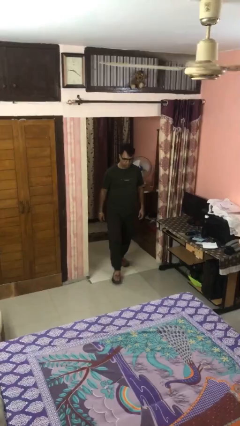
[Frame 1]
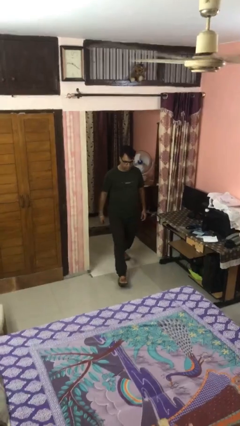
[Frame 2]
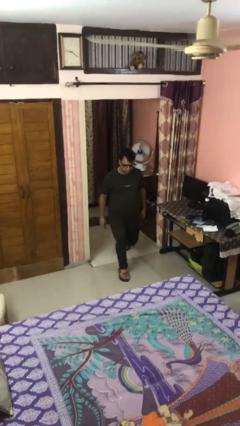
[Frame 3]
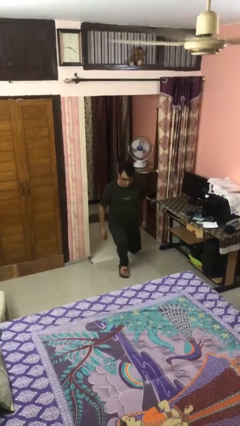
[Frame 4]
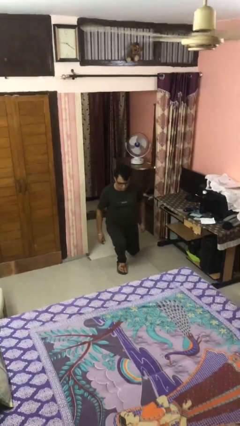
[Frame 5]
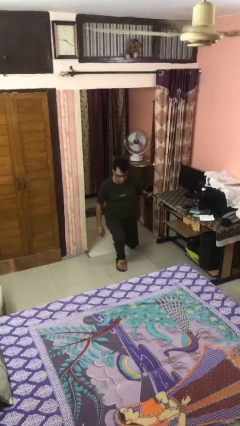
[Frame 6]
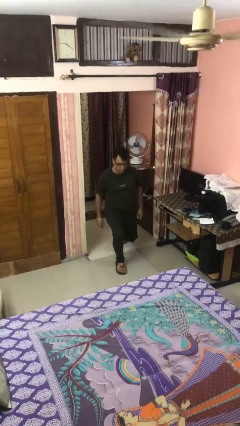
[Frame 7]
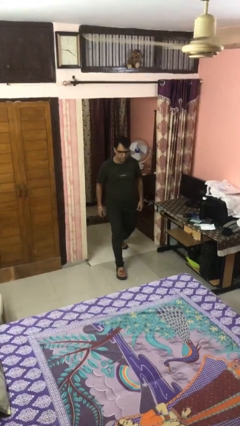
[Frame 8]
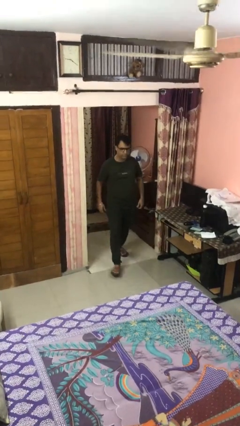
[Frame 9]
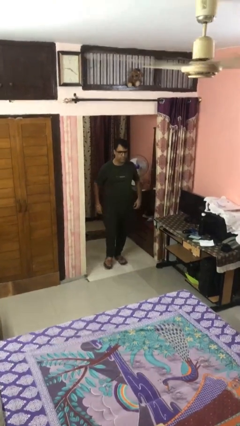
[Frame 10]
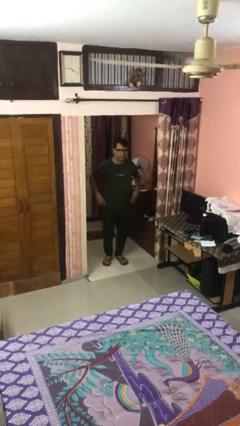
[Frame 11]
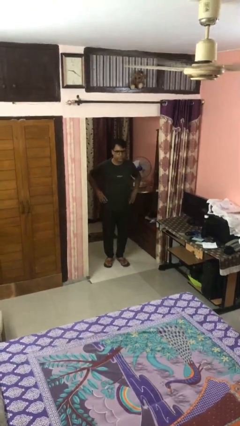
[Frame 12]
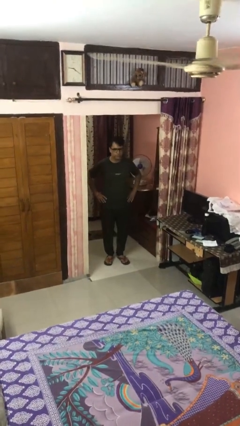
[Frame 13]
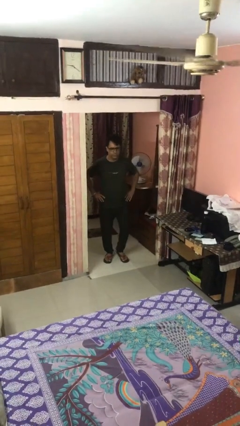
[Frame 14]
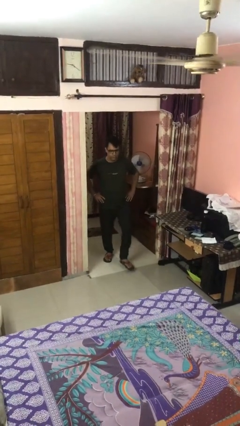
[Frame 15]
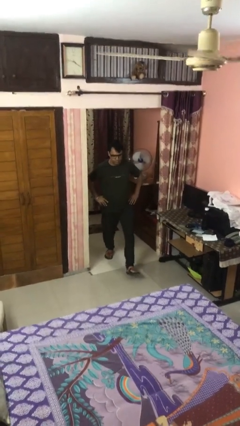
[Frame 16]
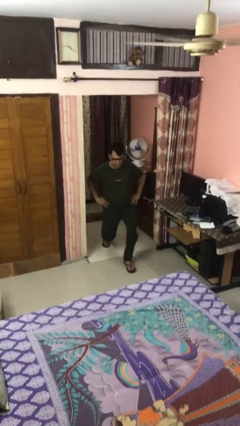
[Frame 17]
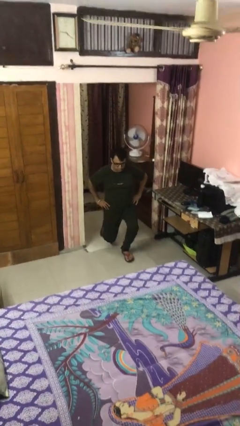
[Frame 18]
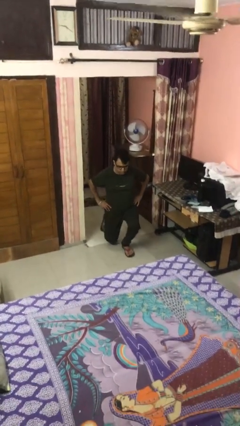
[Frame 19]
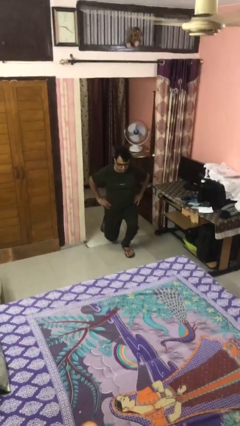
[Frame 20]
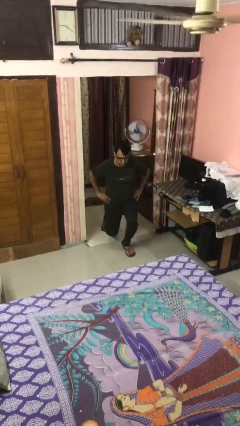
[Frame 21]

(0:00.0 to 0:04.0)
person exercises with lunges

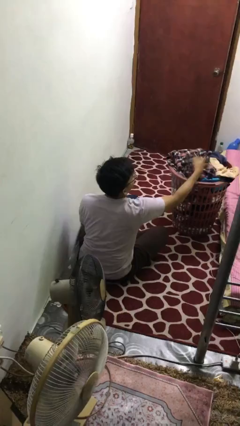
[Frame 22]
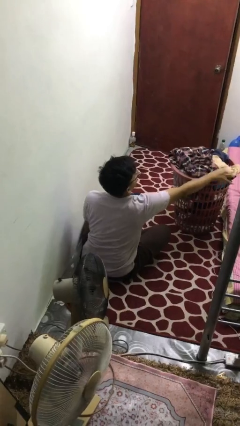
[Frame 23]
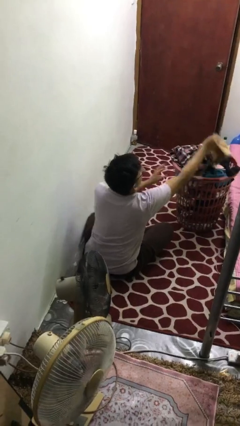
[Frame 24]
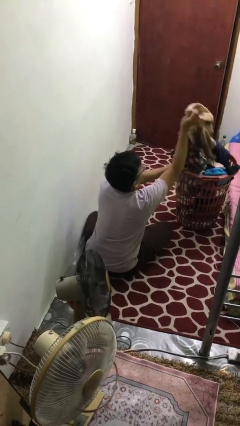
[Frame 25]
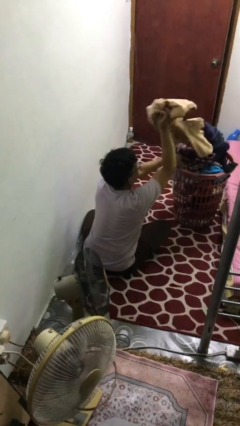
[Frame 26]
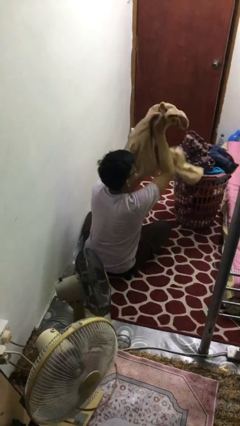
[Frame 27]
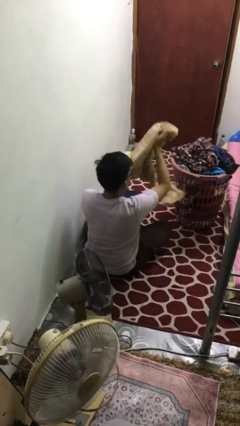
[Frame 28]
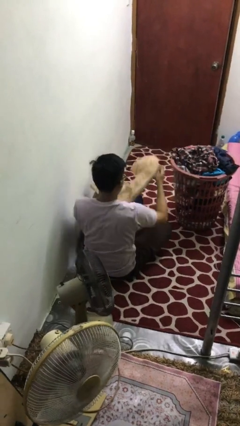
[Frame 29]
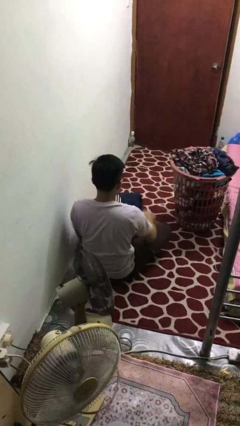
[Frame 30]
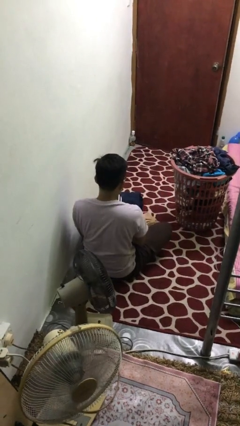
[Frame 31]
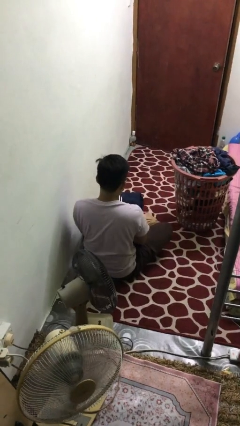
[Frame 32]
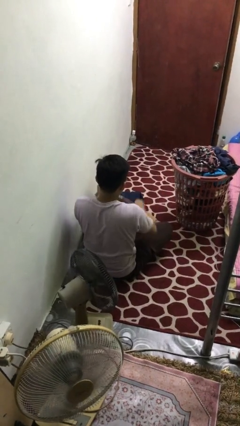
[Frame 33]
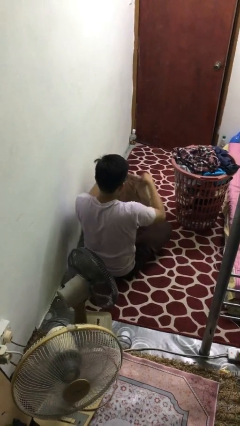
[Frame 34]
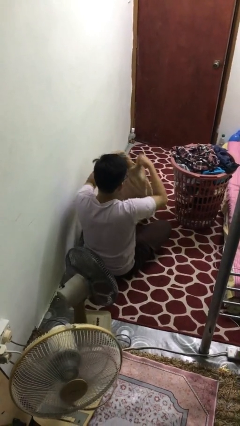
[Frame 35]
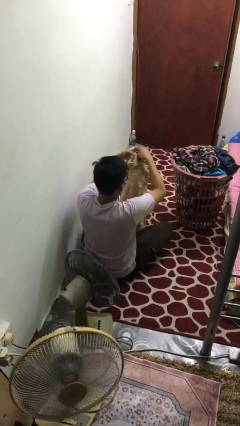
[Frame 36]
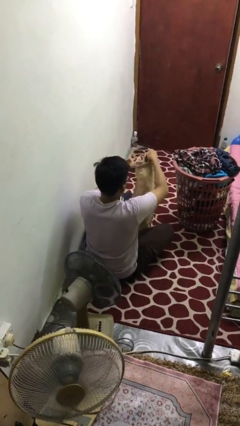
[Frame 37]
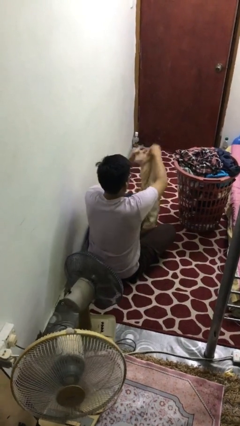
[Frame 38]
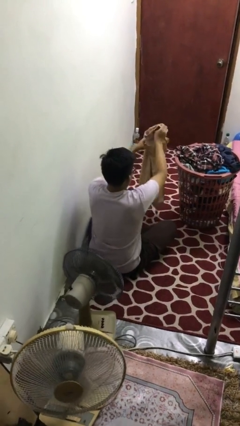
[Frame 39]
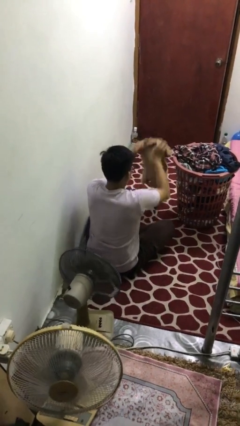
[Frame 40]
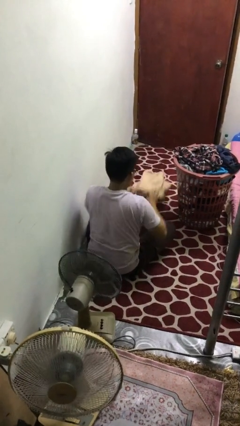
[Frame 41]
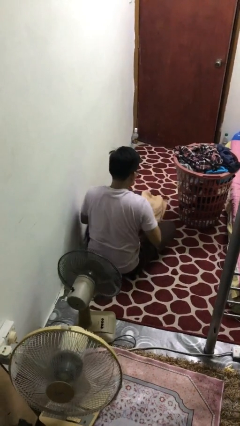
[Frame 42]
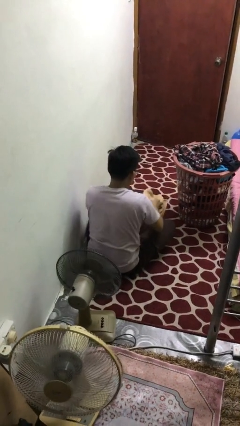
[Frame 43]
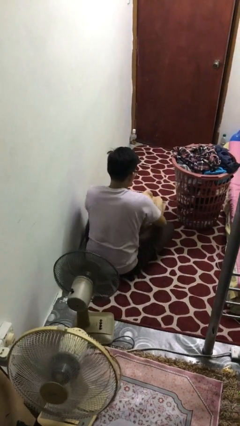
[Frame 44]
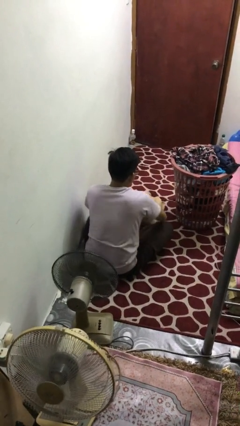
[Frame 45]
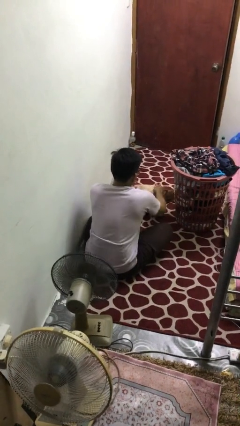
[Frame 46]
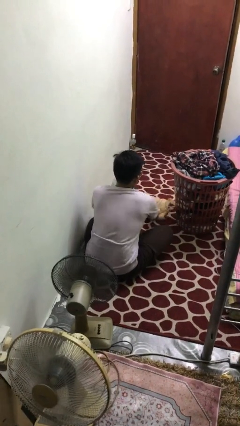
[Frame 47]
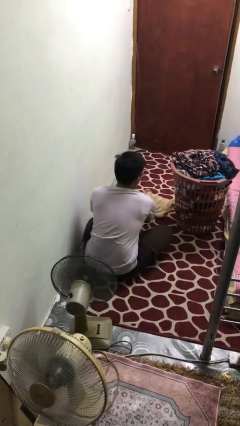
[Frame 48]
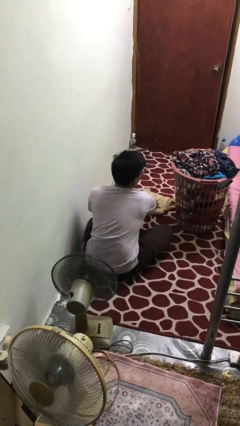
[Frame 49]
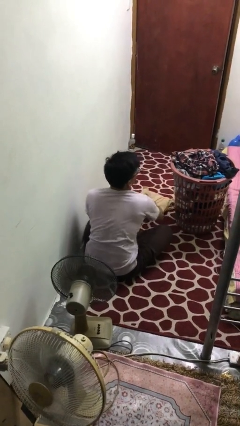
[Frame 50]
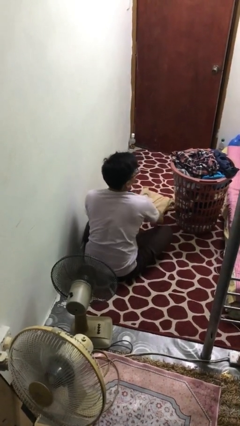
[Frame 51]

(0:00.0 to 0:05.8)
person folds pants

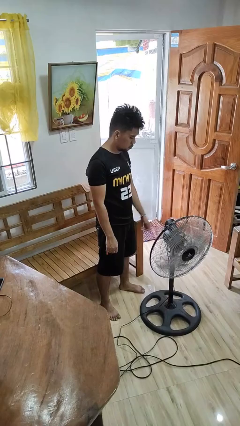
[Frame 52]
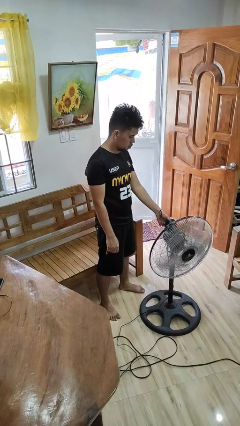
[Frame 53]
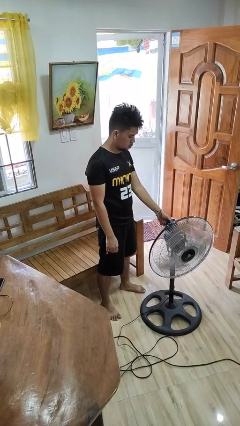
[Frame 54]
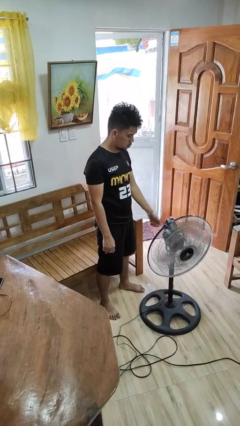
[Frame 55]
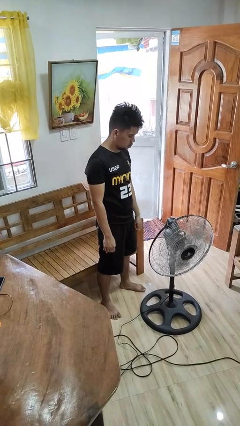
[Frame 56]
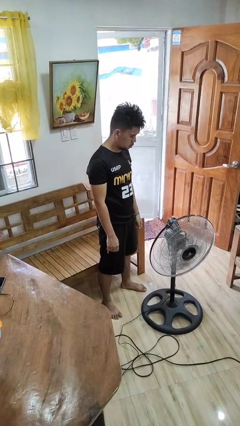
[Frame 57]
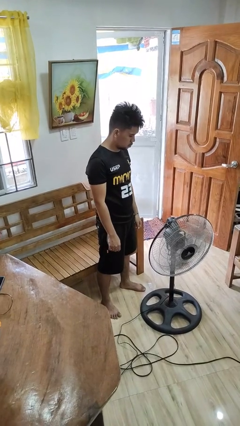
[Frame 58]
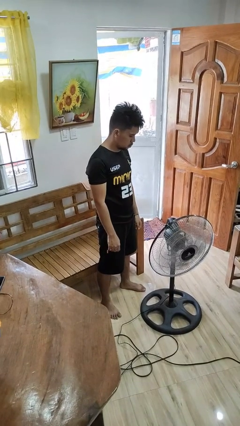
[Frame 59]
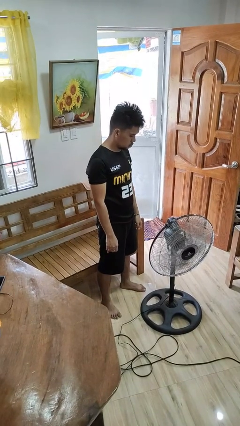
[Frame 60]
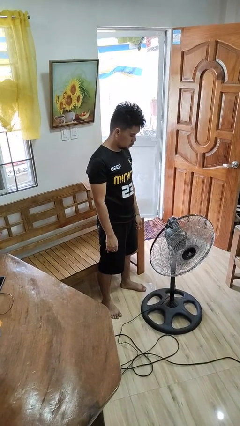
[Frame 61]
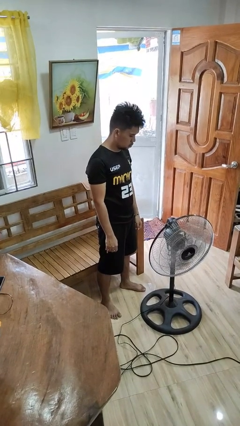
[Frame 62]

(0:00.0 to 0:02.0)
person turns on fan

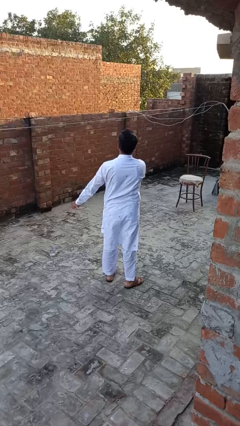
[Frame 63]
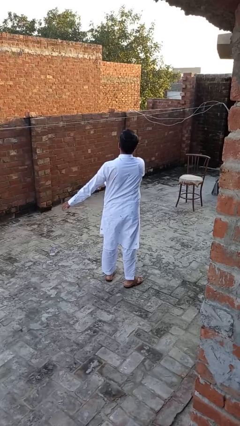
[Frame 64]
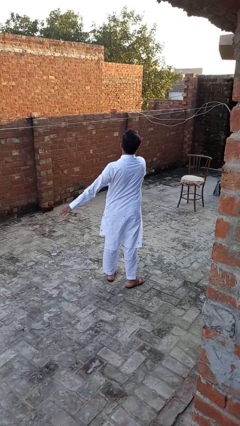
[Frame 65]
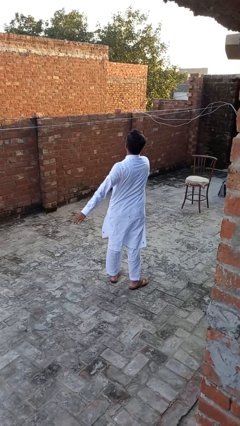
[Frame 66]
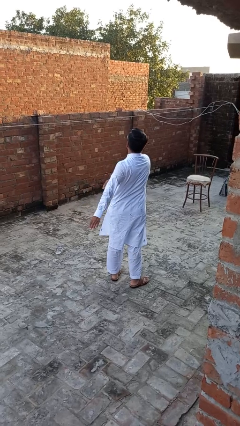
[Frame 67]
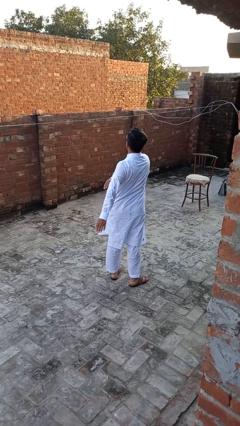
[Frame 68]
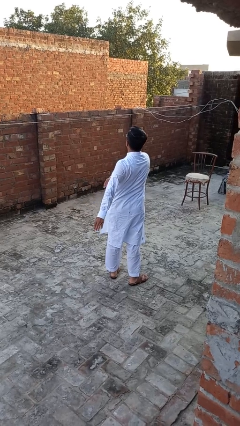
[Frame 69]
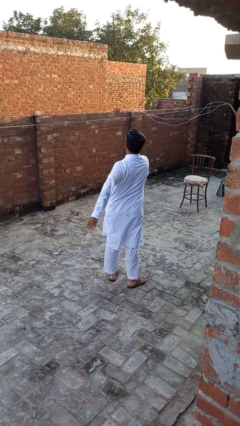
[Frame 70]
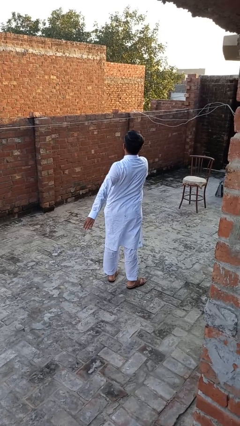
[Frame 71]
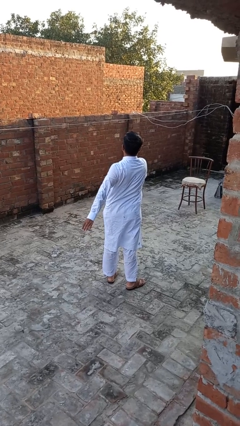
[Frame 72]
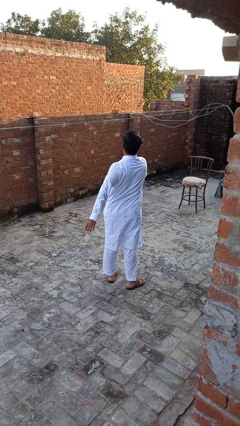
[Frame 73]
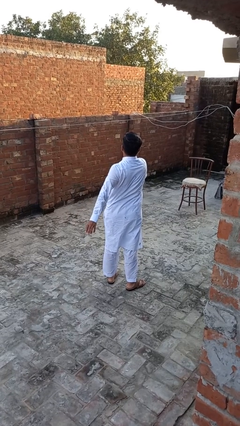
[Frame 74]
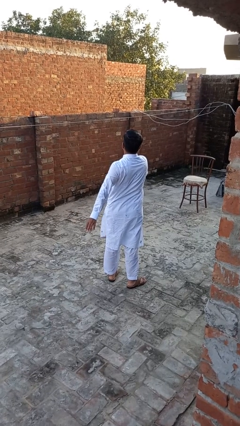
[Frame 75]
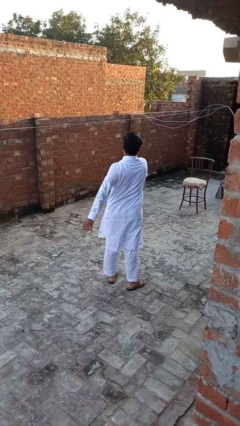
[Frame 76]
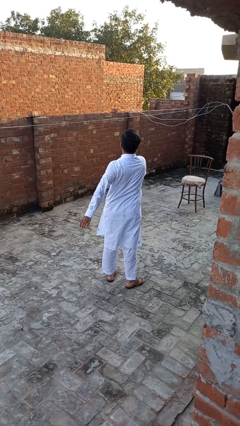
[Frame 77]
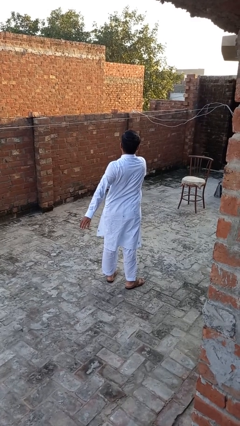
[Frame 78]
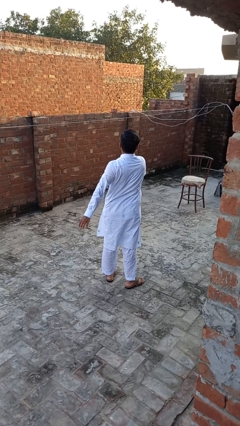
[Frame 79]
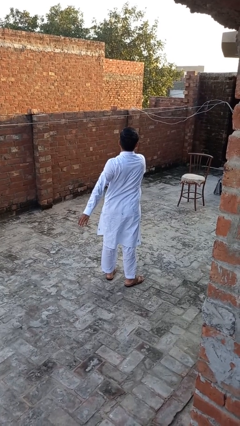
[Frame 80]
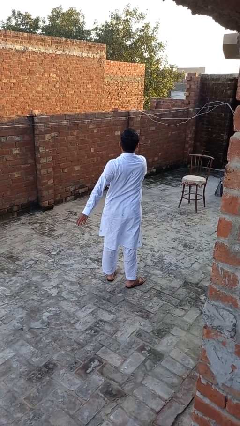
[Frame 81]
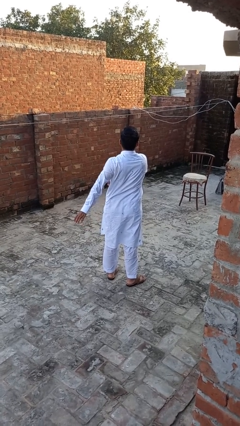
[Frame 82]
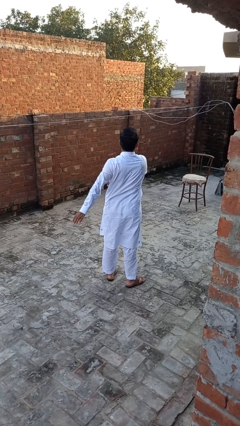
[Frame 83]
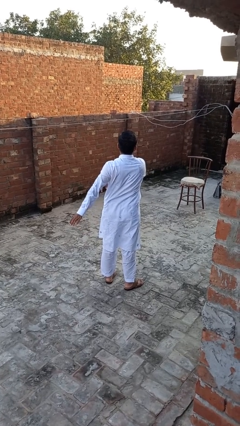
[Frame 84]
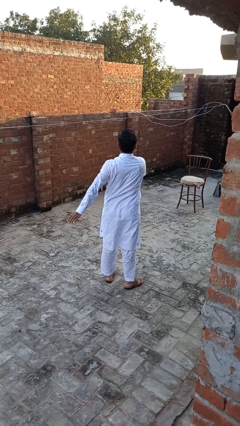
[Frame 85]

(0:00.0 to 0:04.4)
person gestures swipe left

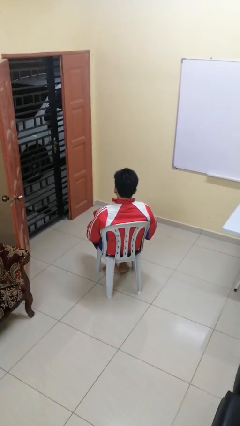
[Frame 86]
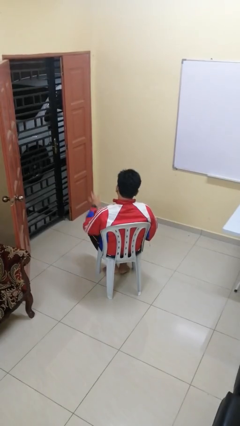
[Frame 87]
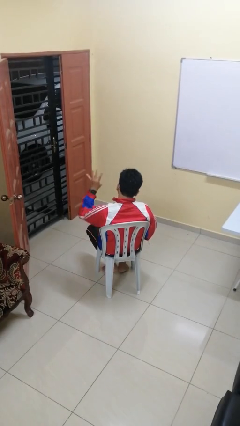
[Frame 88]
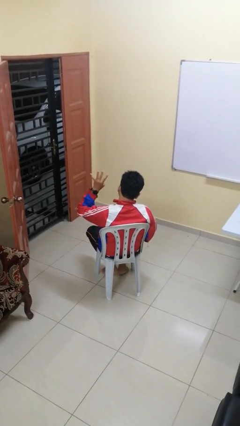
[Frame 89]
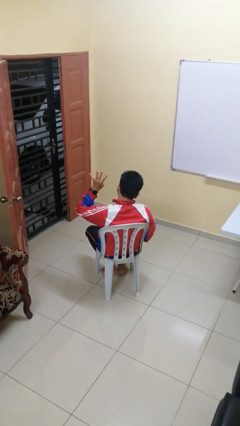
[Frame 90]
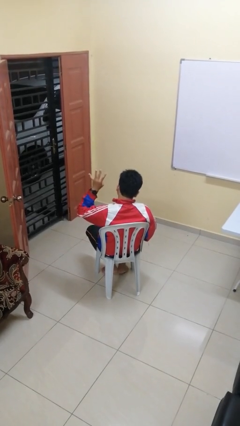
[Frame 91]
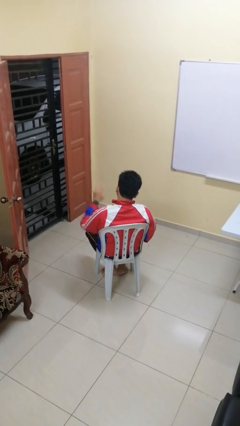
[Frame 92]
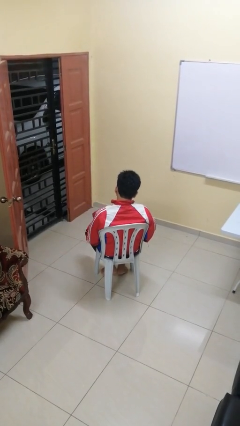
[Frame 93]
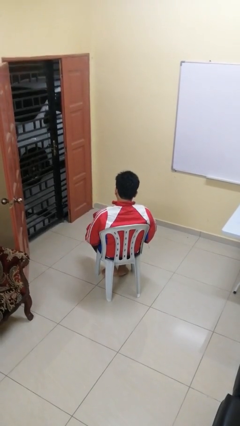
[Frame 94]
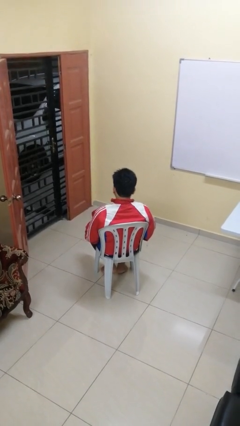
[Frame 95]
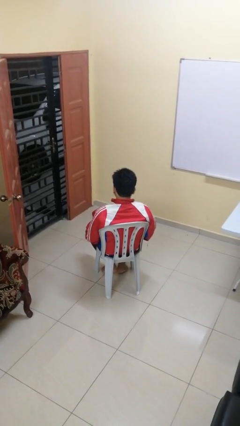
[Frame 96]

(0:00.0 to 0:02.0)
person gestures number four
